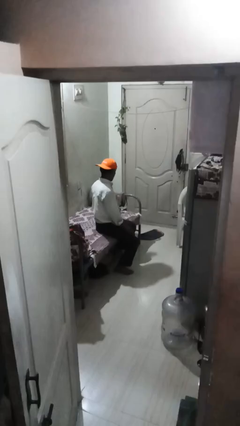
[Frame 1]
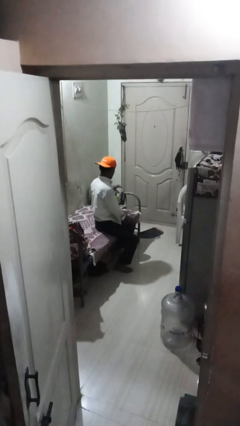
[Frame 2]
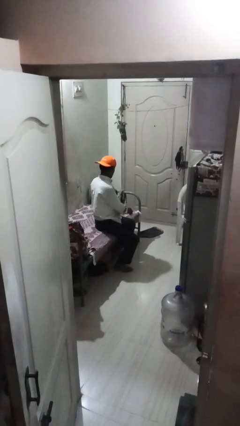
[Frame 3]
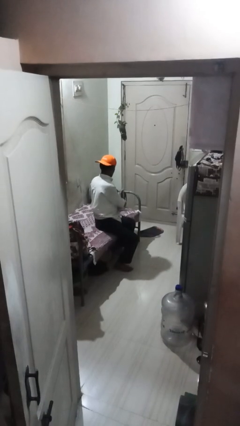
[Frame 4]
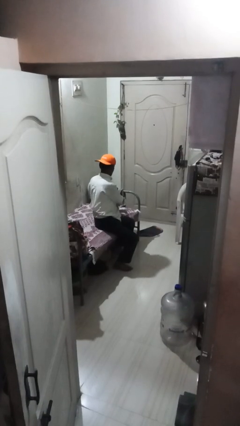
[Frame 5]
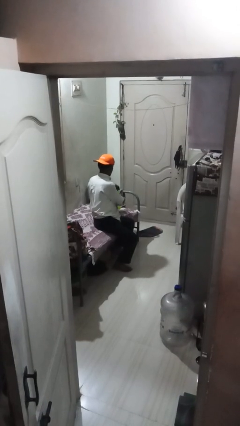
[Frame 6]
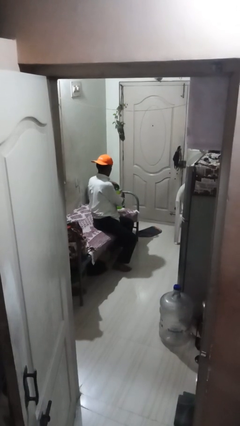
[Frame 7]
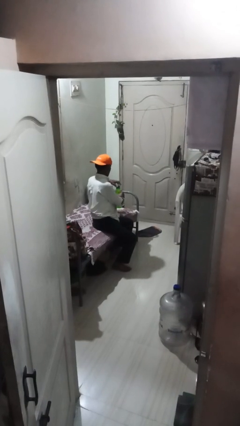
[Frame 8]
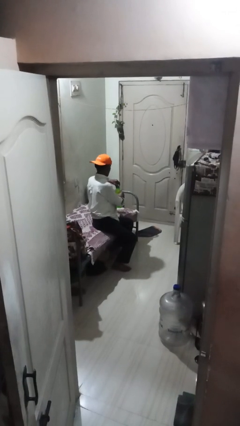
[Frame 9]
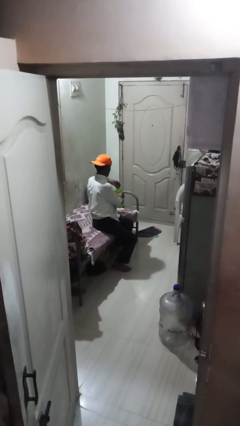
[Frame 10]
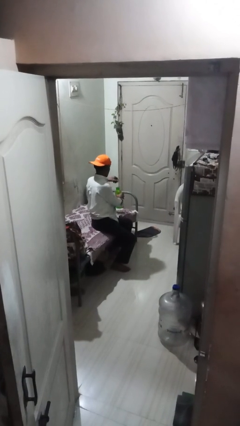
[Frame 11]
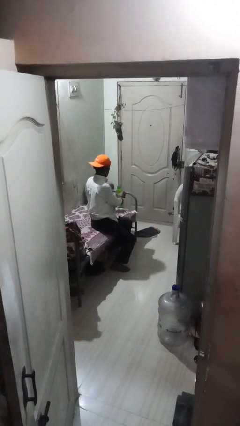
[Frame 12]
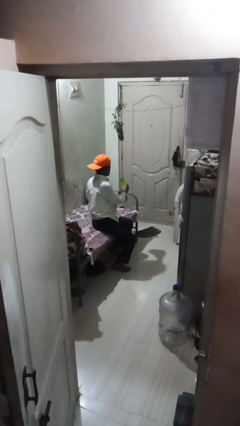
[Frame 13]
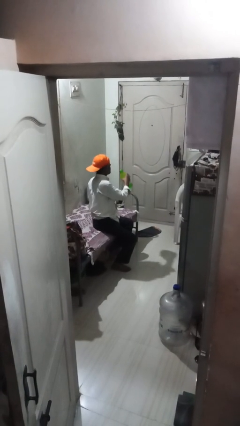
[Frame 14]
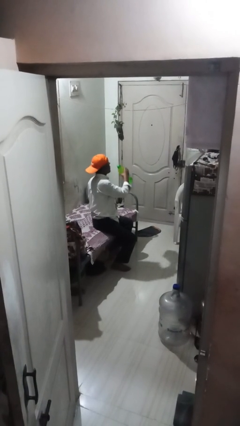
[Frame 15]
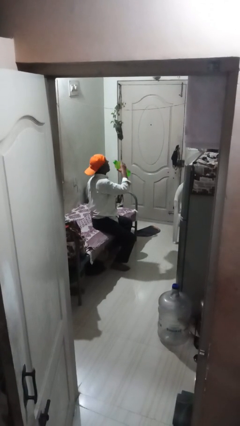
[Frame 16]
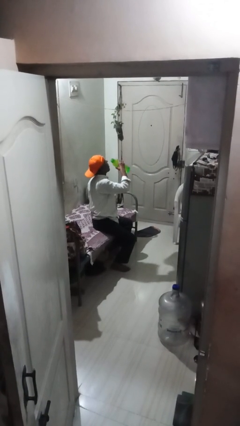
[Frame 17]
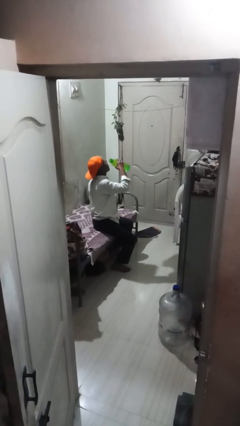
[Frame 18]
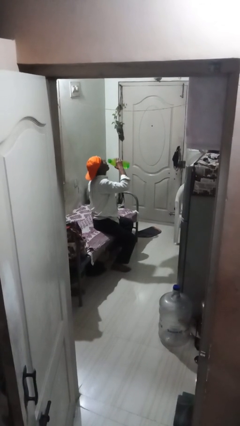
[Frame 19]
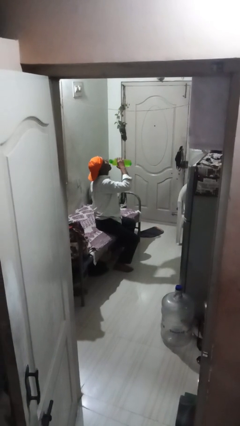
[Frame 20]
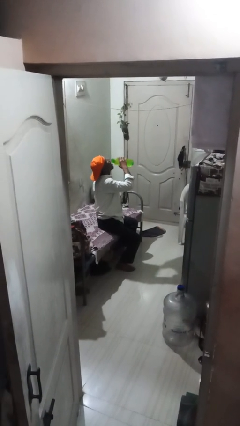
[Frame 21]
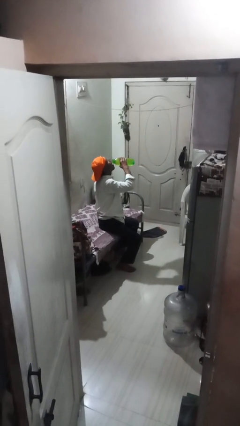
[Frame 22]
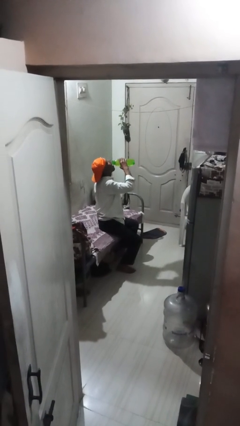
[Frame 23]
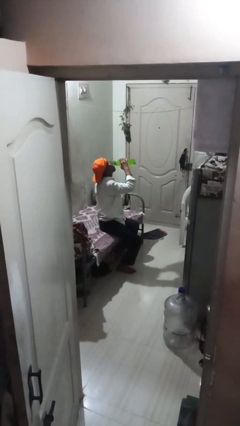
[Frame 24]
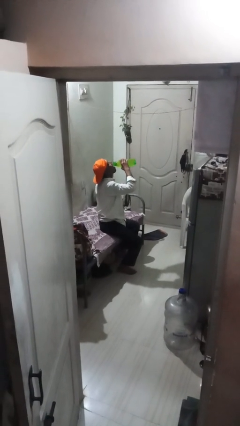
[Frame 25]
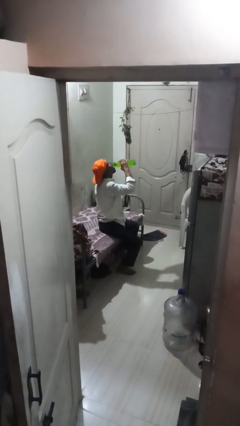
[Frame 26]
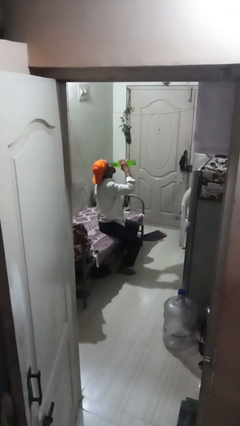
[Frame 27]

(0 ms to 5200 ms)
person drinks from bottle

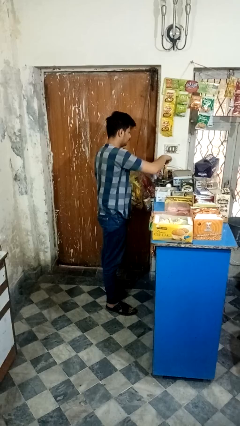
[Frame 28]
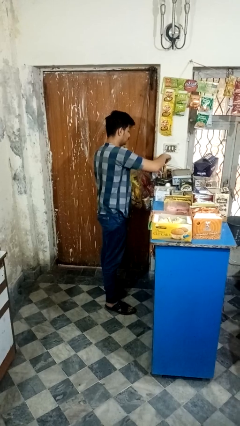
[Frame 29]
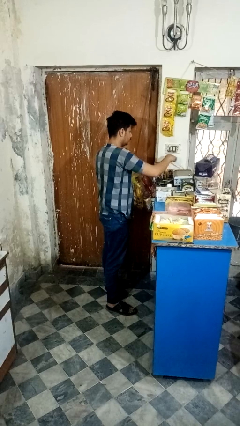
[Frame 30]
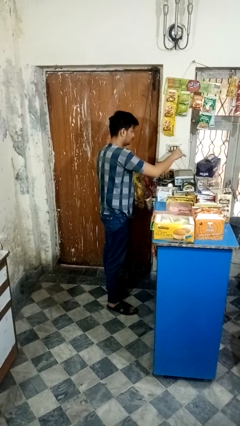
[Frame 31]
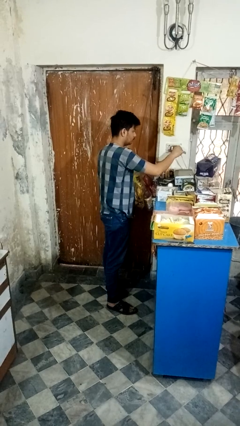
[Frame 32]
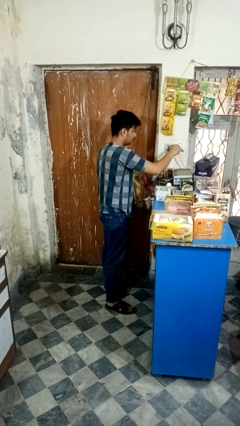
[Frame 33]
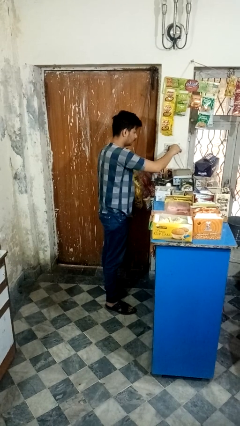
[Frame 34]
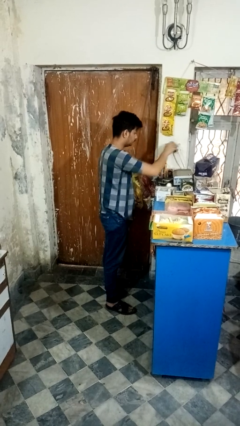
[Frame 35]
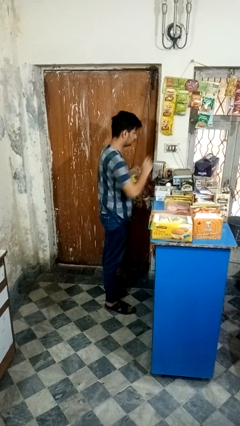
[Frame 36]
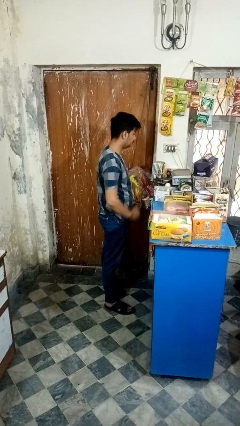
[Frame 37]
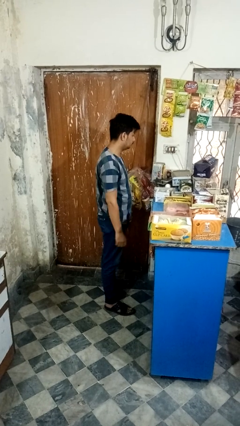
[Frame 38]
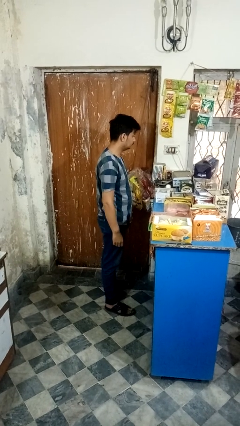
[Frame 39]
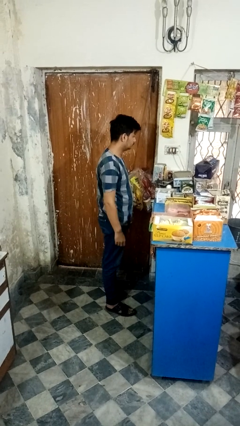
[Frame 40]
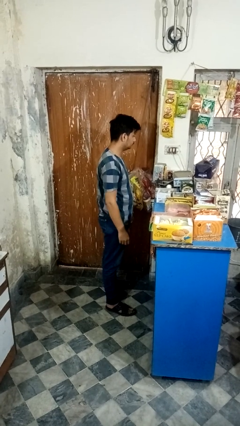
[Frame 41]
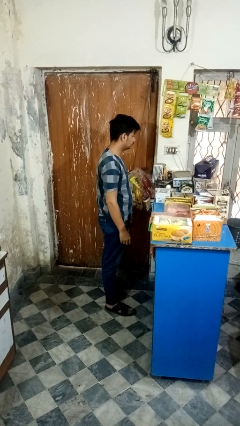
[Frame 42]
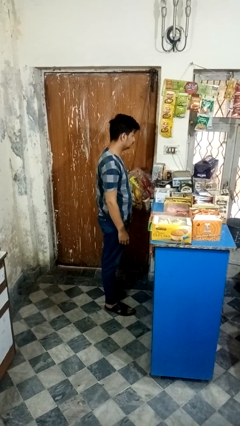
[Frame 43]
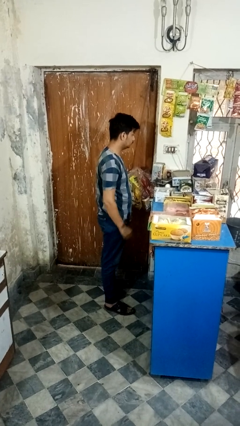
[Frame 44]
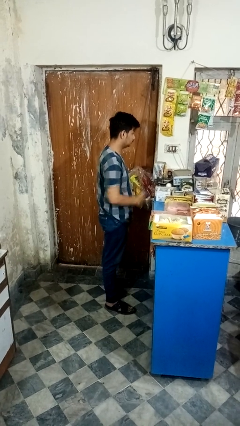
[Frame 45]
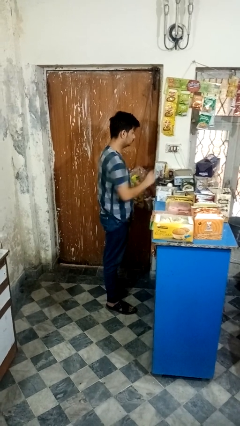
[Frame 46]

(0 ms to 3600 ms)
person plugs into electrical socket

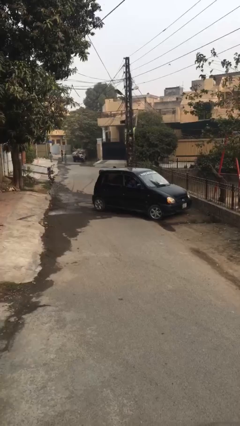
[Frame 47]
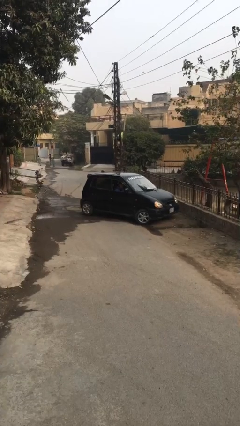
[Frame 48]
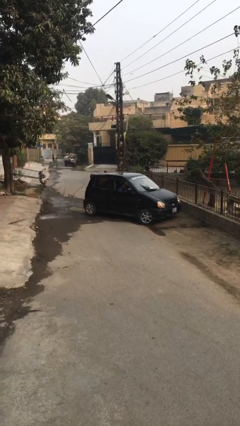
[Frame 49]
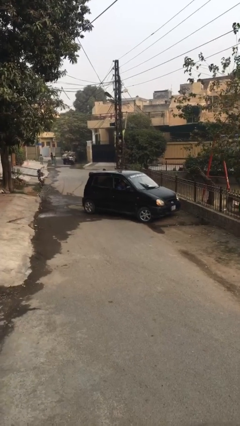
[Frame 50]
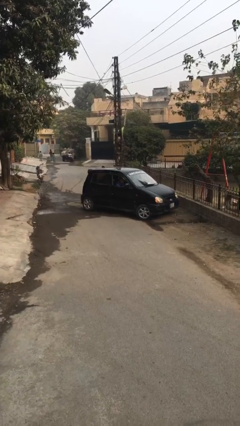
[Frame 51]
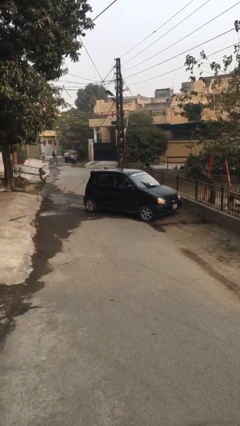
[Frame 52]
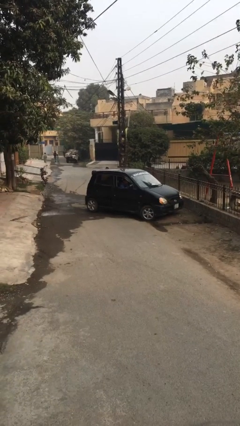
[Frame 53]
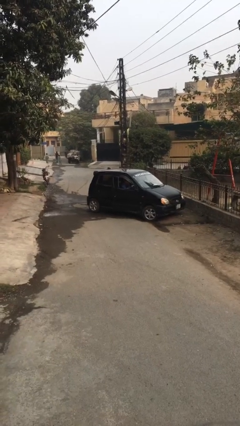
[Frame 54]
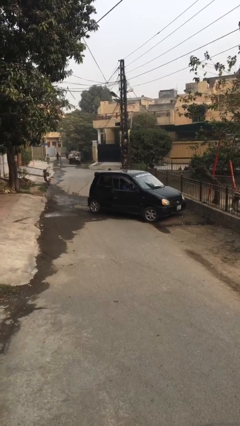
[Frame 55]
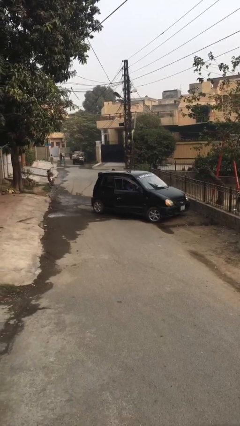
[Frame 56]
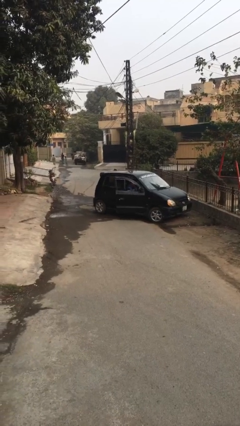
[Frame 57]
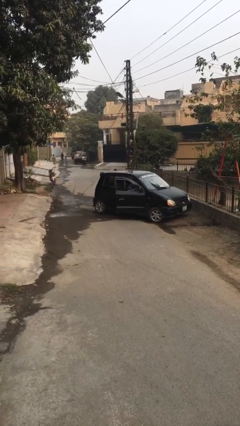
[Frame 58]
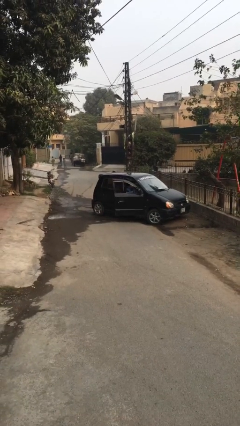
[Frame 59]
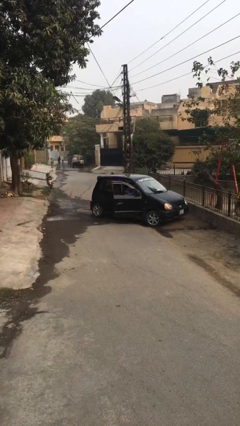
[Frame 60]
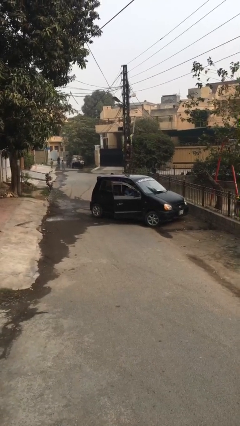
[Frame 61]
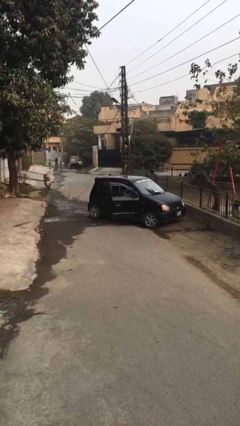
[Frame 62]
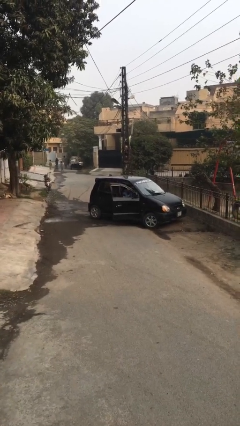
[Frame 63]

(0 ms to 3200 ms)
person opens car door

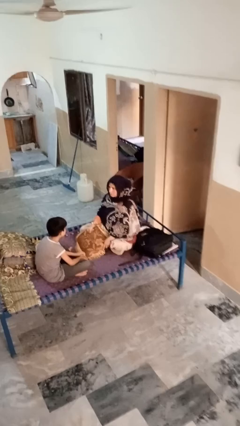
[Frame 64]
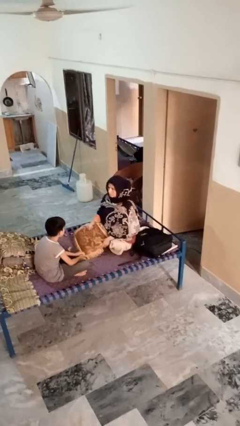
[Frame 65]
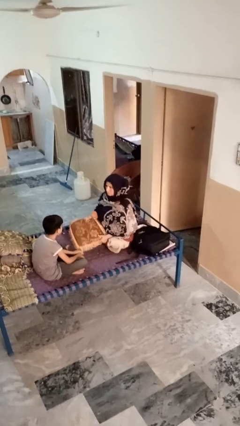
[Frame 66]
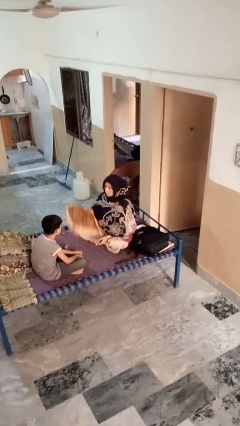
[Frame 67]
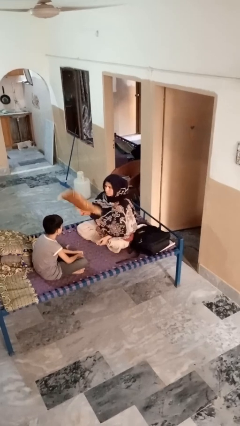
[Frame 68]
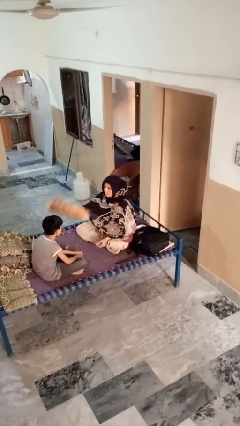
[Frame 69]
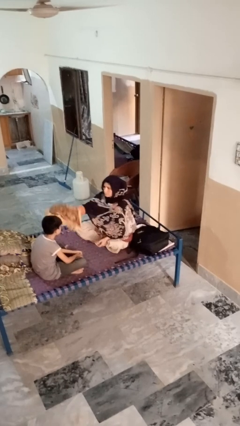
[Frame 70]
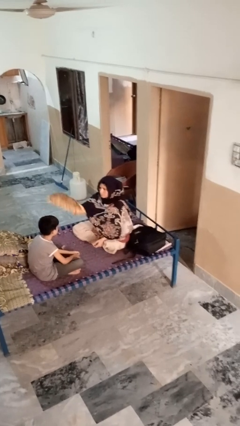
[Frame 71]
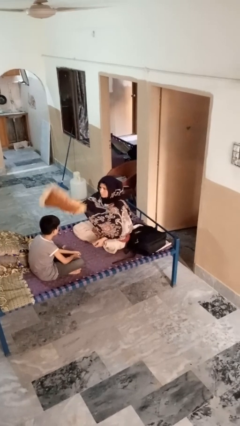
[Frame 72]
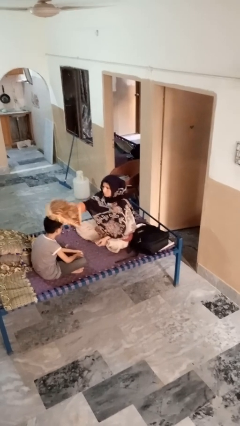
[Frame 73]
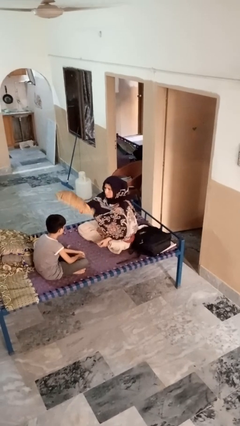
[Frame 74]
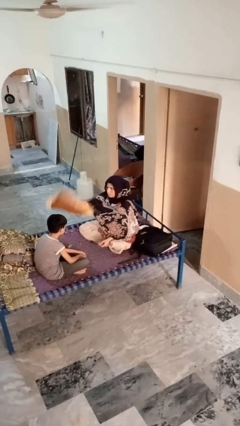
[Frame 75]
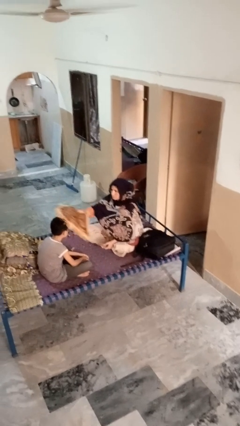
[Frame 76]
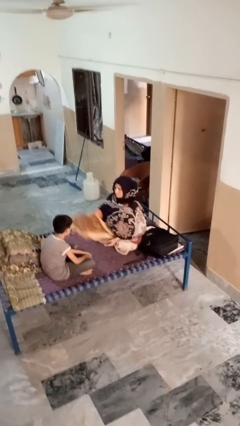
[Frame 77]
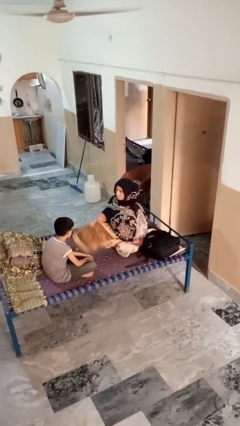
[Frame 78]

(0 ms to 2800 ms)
person hits person with pillow

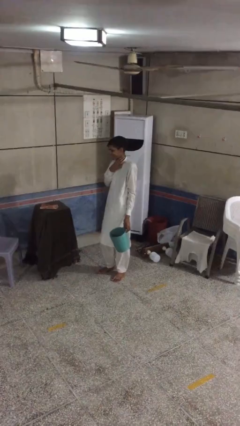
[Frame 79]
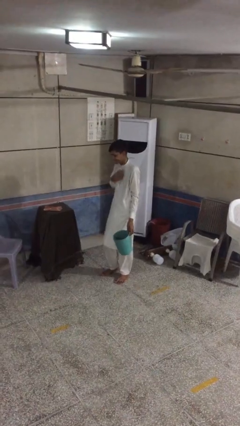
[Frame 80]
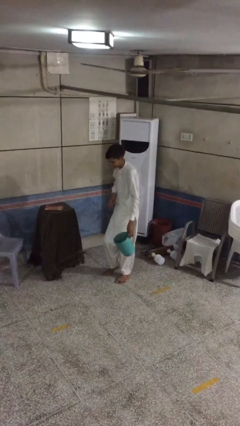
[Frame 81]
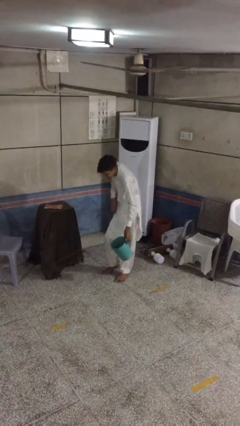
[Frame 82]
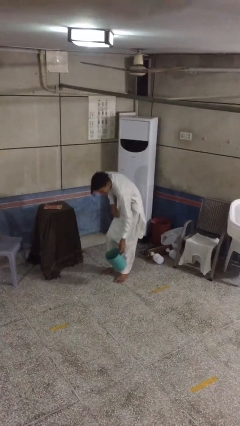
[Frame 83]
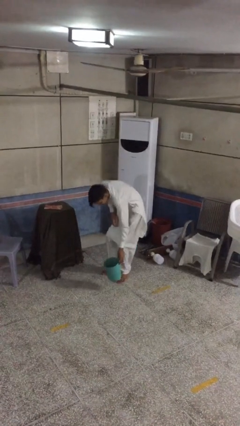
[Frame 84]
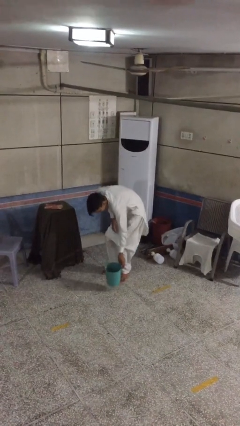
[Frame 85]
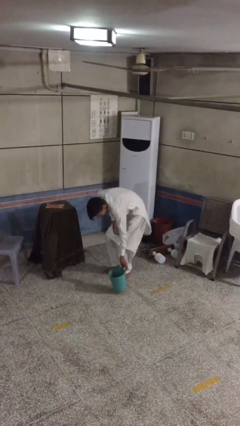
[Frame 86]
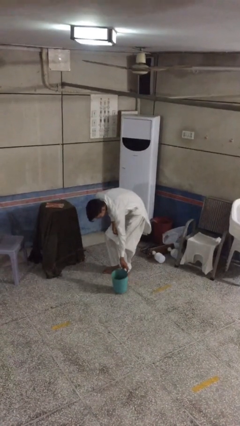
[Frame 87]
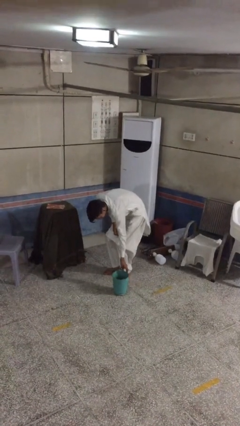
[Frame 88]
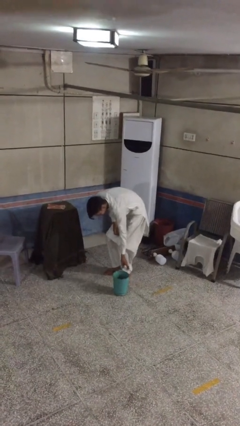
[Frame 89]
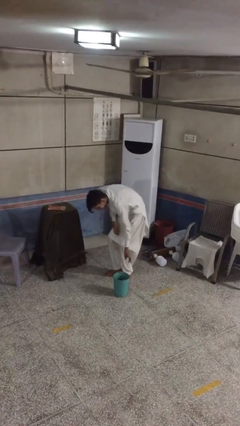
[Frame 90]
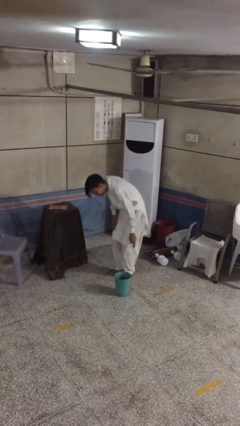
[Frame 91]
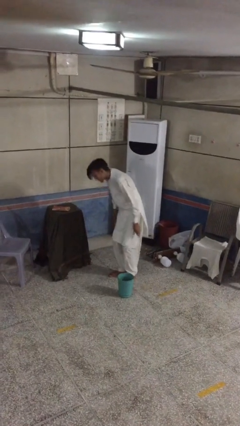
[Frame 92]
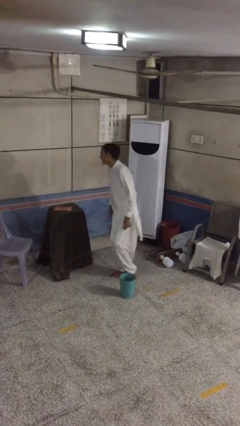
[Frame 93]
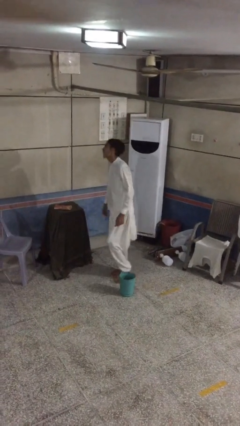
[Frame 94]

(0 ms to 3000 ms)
person puts down object on floor
